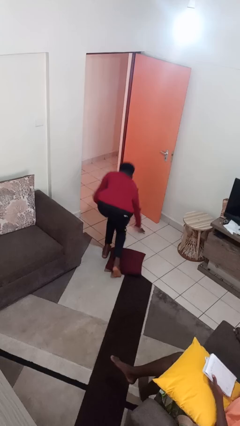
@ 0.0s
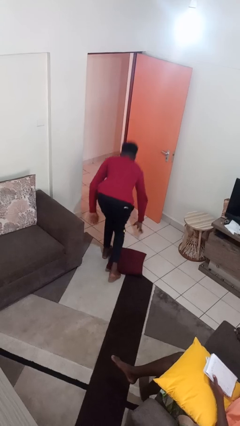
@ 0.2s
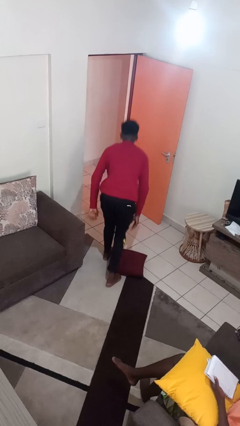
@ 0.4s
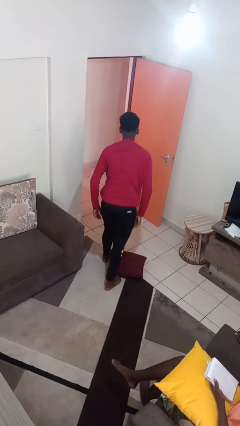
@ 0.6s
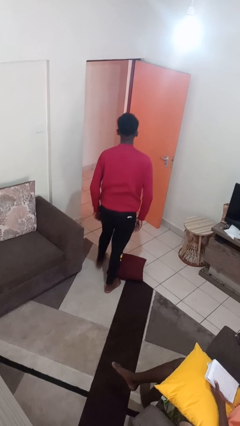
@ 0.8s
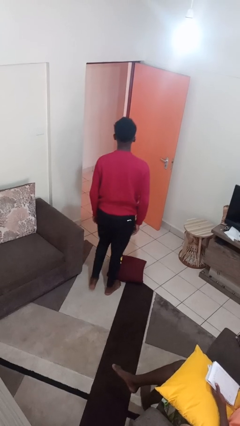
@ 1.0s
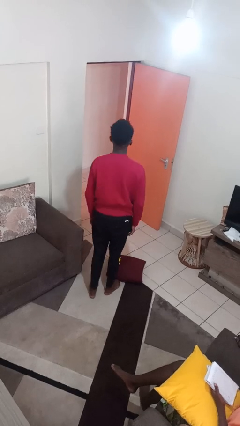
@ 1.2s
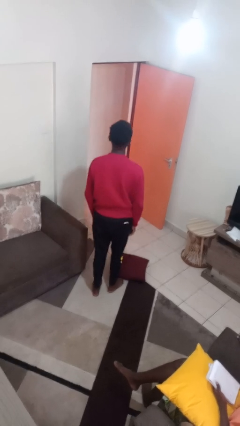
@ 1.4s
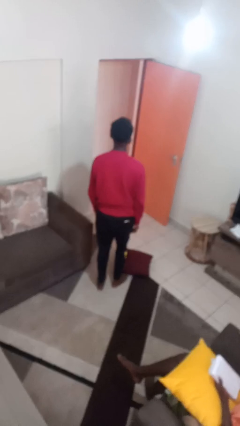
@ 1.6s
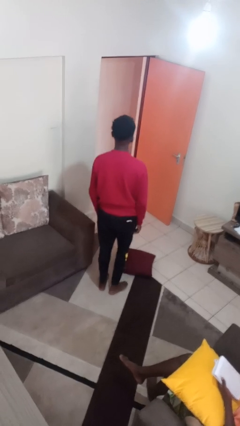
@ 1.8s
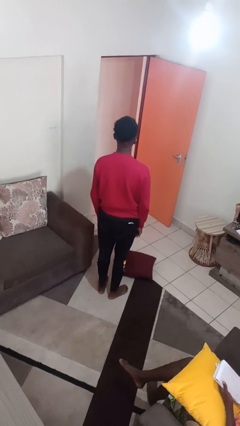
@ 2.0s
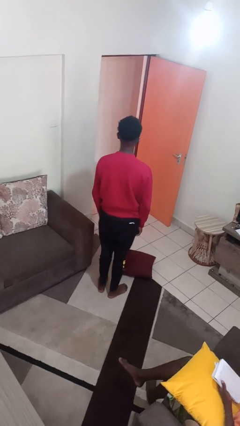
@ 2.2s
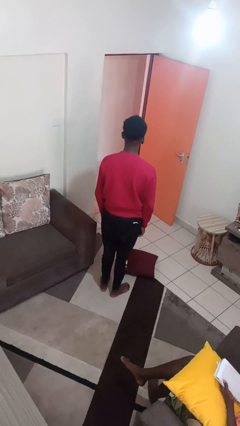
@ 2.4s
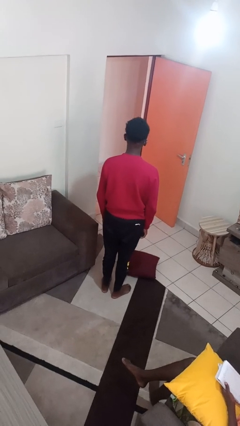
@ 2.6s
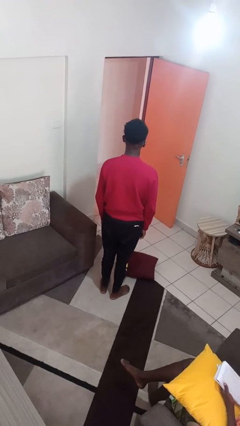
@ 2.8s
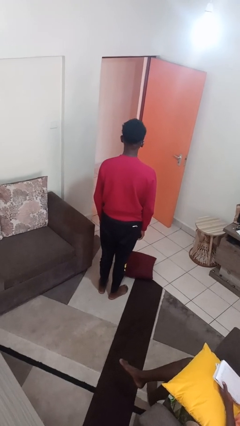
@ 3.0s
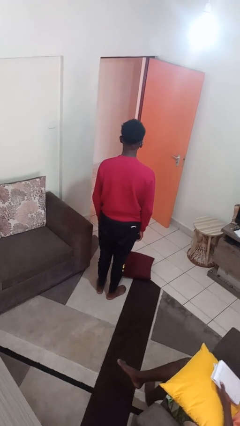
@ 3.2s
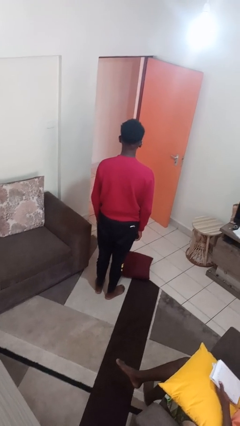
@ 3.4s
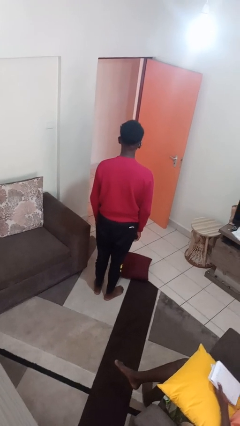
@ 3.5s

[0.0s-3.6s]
person stands up from floor

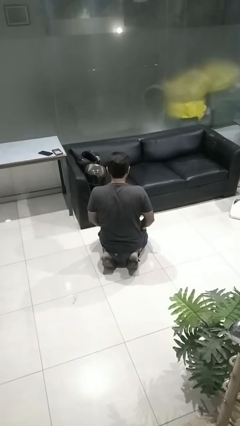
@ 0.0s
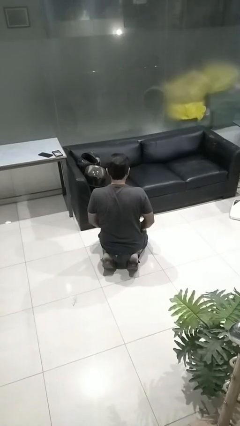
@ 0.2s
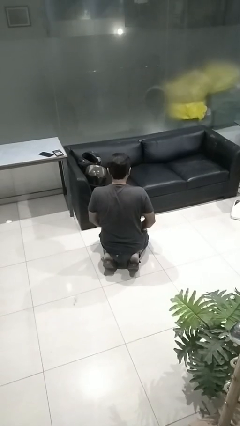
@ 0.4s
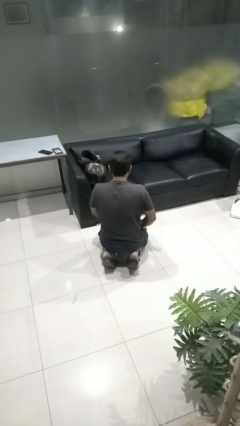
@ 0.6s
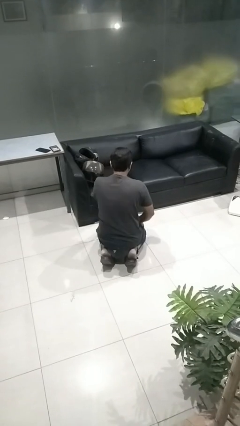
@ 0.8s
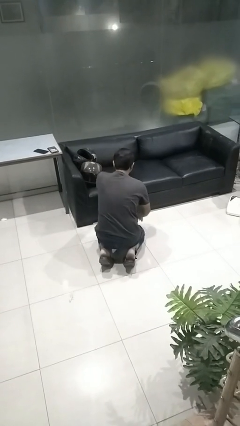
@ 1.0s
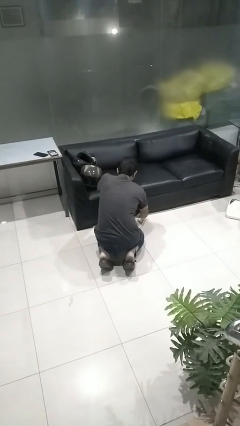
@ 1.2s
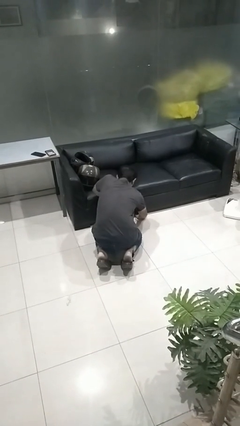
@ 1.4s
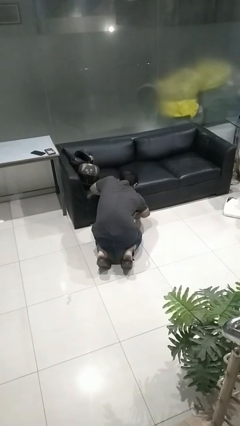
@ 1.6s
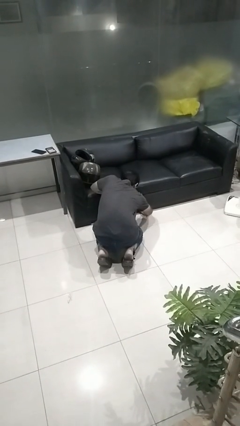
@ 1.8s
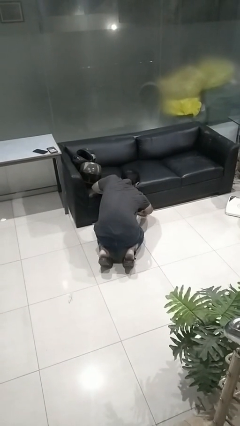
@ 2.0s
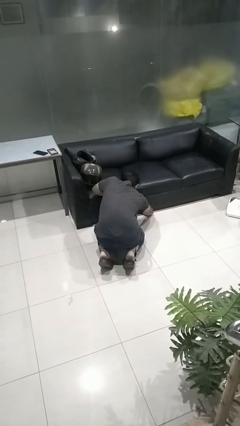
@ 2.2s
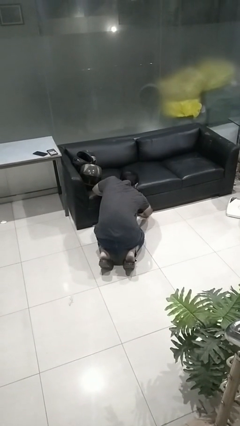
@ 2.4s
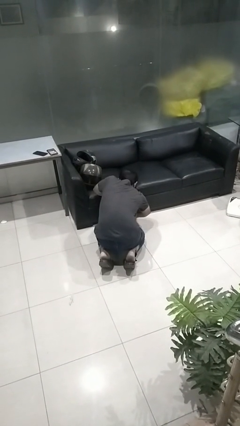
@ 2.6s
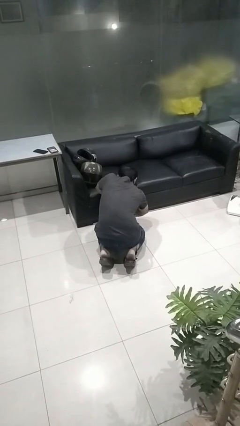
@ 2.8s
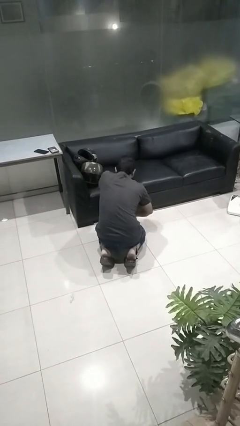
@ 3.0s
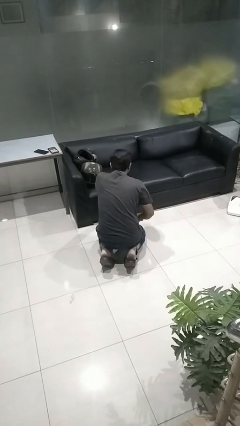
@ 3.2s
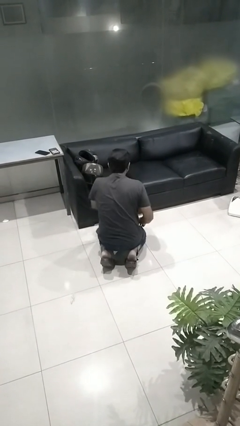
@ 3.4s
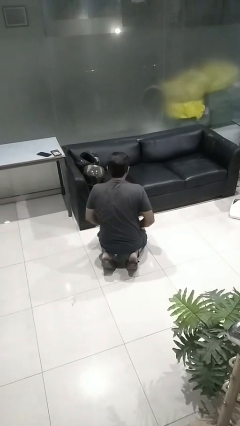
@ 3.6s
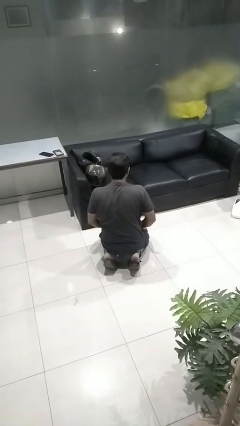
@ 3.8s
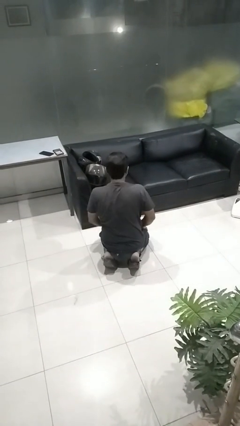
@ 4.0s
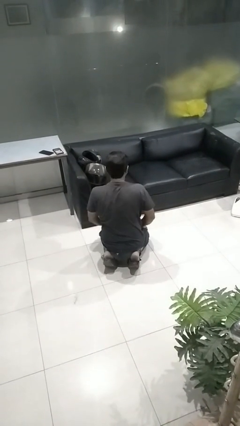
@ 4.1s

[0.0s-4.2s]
person searches under couch

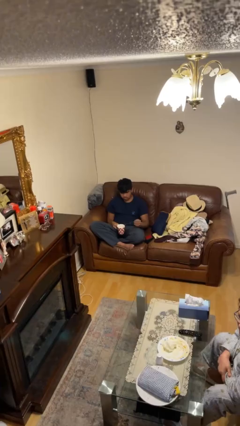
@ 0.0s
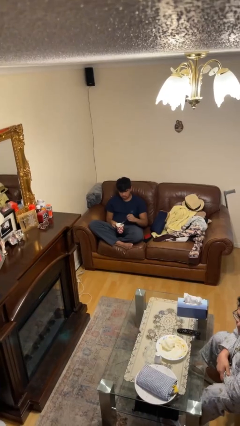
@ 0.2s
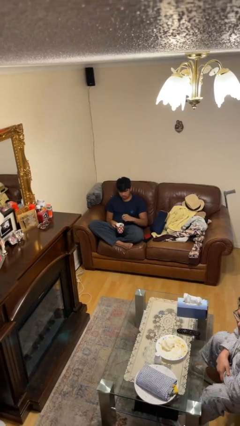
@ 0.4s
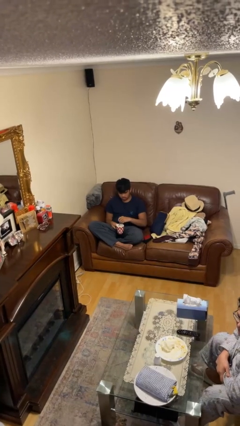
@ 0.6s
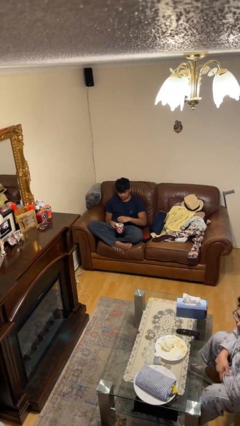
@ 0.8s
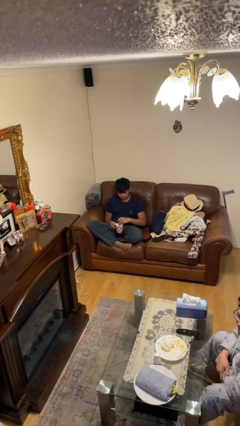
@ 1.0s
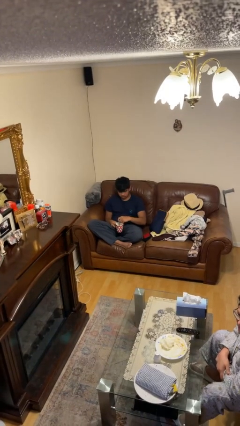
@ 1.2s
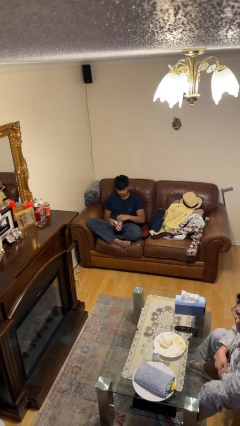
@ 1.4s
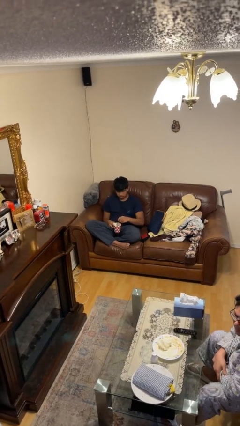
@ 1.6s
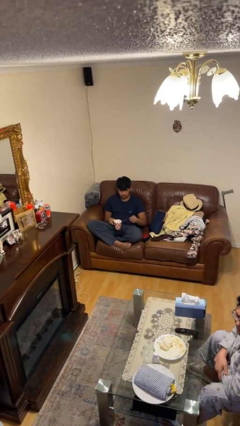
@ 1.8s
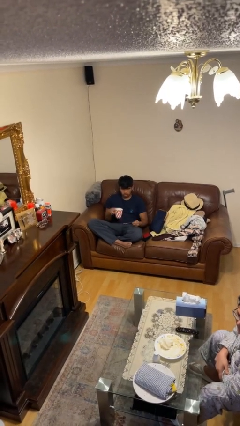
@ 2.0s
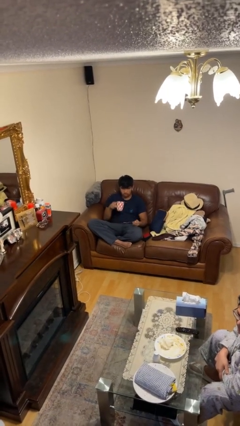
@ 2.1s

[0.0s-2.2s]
person stirs mug

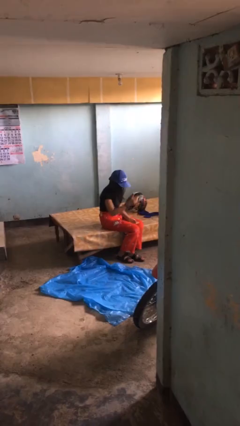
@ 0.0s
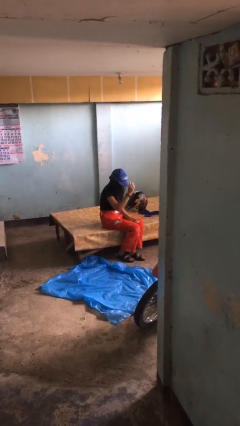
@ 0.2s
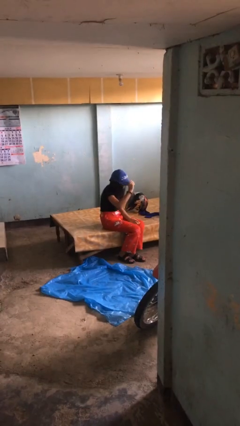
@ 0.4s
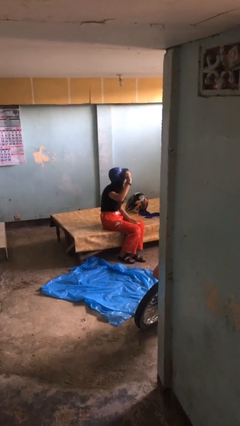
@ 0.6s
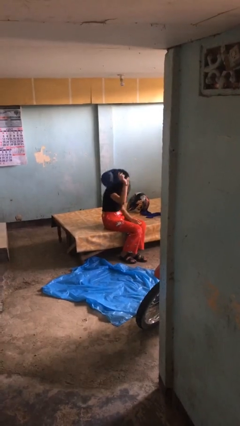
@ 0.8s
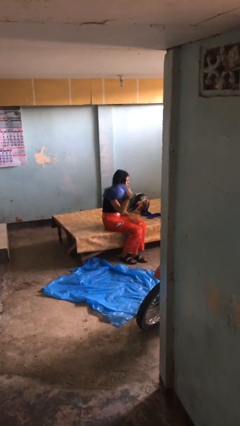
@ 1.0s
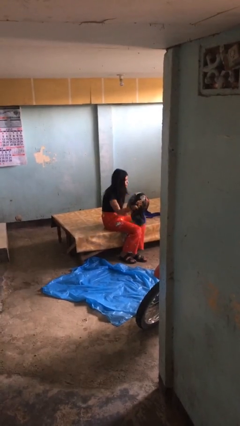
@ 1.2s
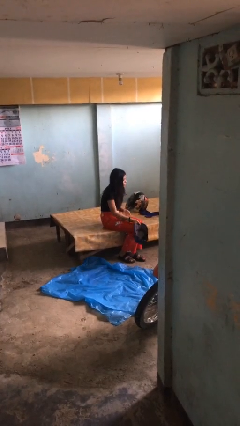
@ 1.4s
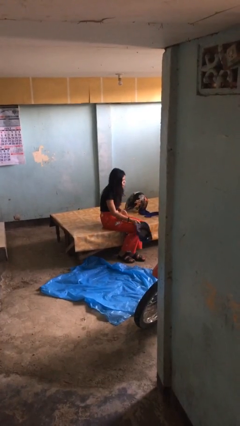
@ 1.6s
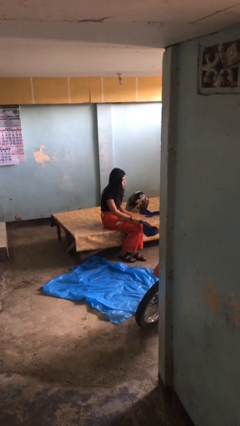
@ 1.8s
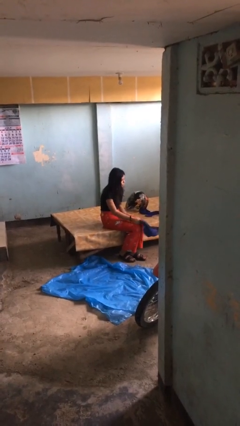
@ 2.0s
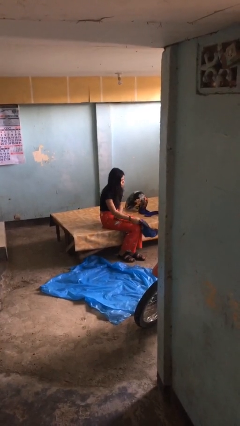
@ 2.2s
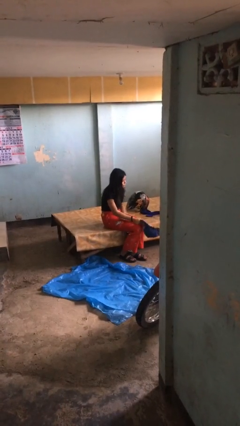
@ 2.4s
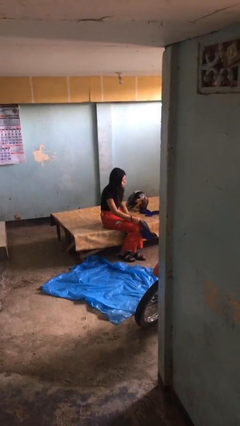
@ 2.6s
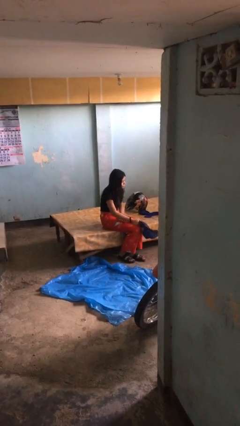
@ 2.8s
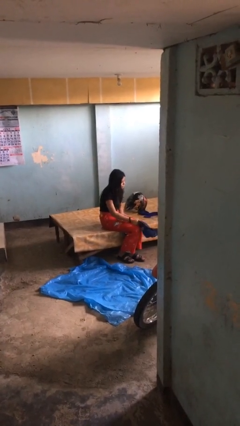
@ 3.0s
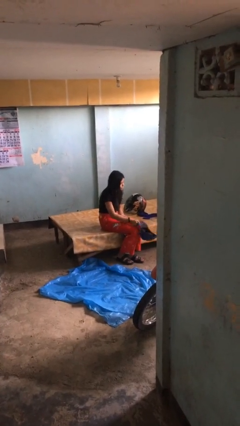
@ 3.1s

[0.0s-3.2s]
person takes off hat

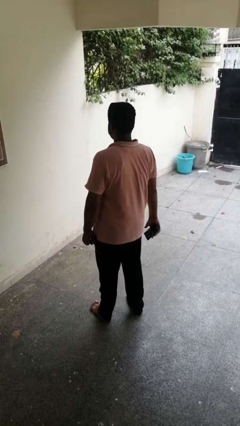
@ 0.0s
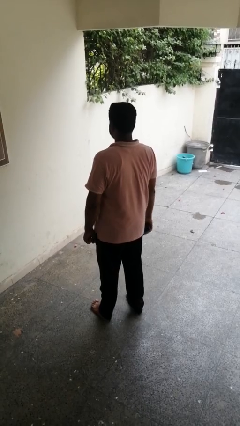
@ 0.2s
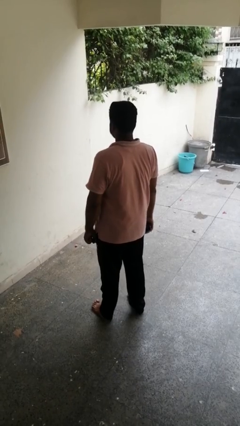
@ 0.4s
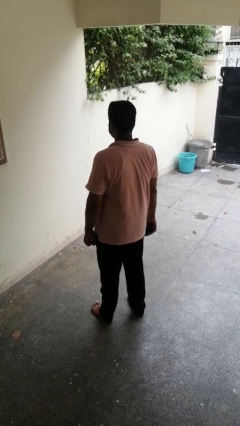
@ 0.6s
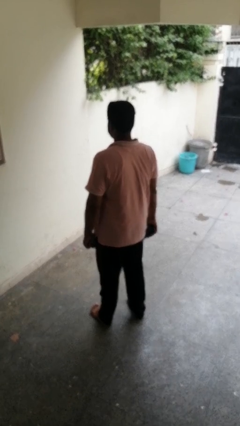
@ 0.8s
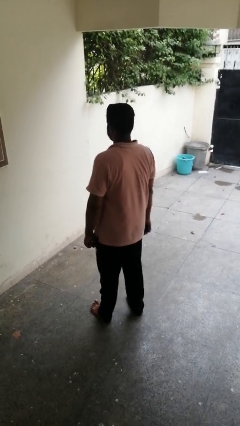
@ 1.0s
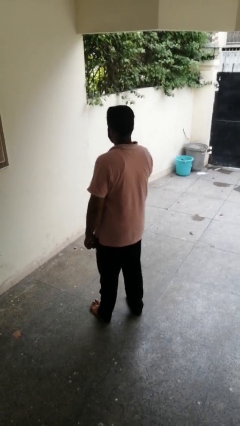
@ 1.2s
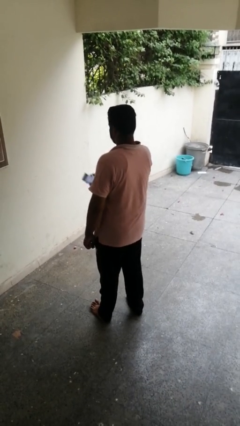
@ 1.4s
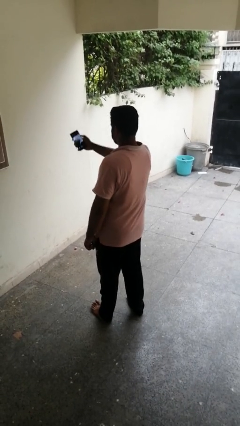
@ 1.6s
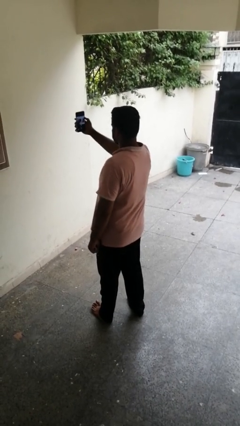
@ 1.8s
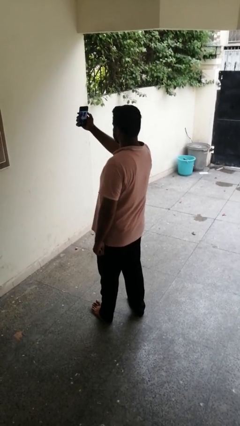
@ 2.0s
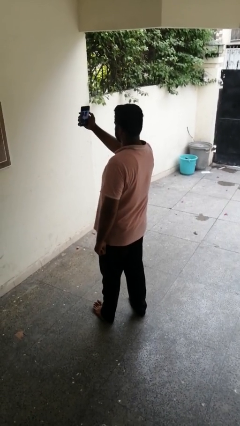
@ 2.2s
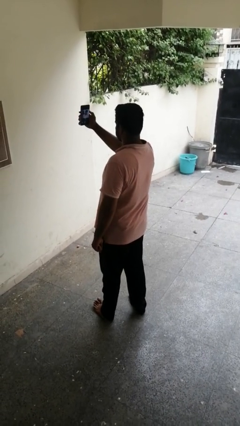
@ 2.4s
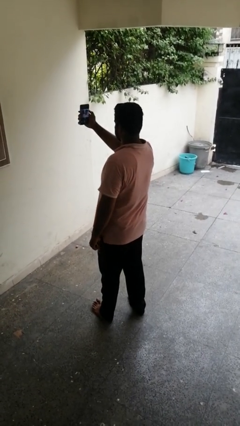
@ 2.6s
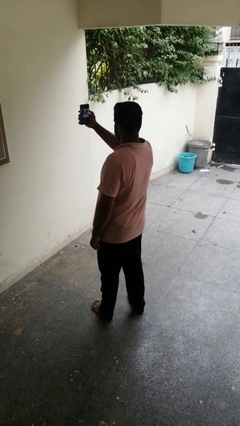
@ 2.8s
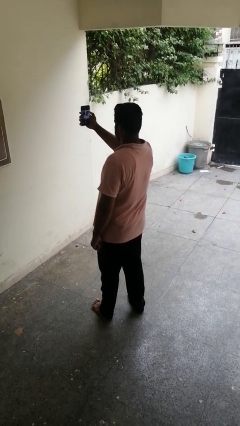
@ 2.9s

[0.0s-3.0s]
person takes selfie

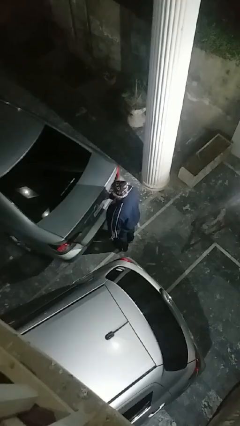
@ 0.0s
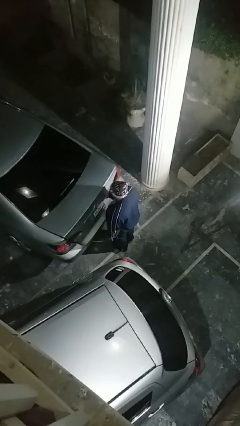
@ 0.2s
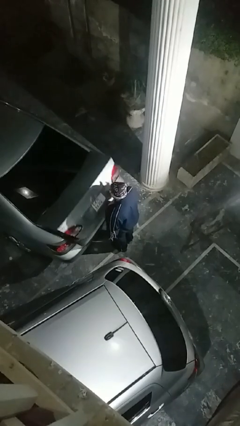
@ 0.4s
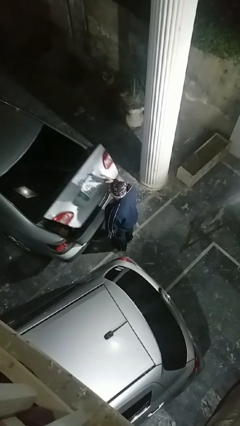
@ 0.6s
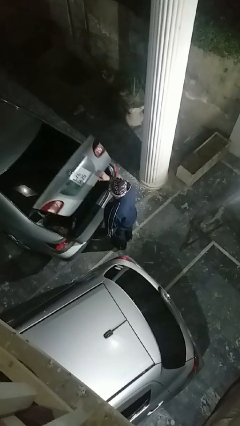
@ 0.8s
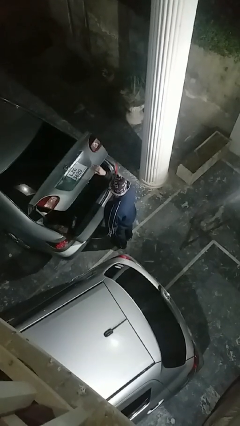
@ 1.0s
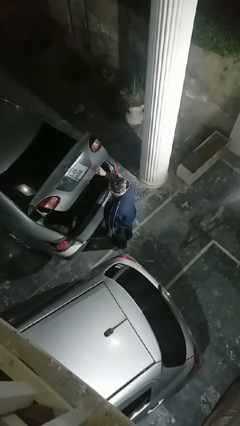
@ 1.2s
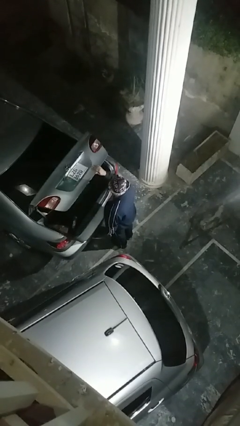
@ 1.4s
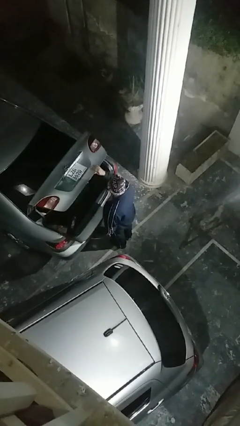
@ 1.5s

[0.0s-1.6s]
person opens car trunk
